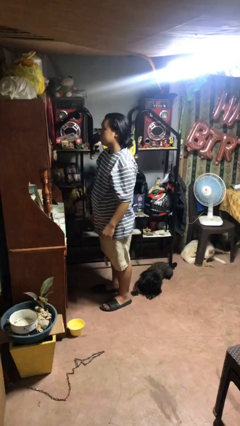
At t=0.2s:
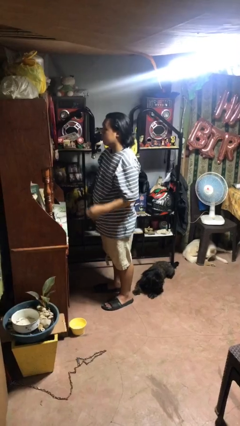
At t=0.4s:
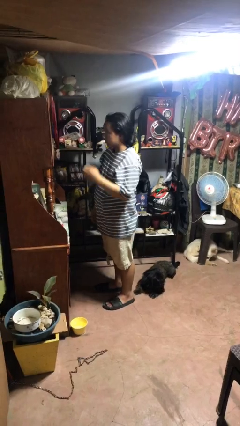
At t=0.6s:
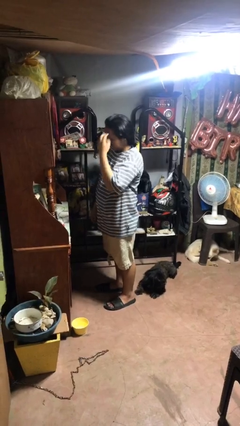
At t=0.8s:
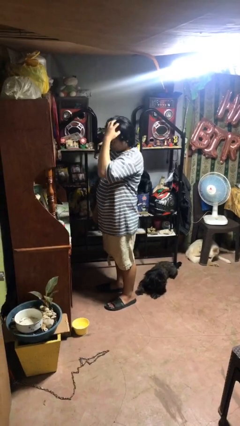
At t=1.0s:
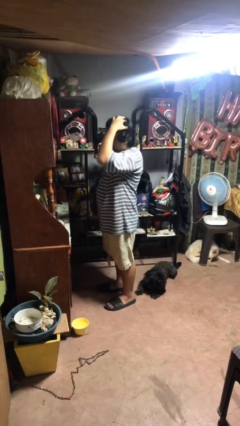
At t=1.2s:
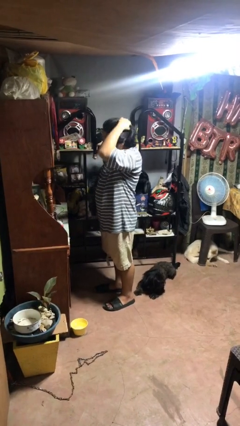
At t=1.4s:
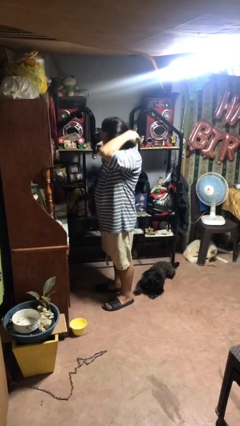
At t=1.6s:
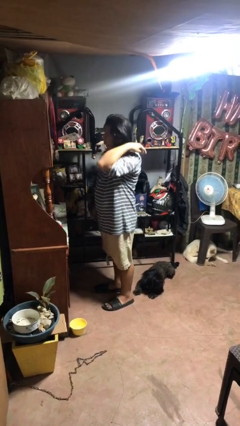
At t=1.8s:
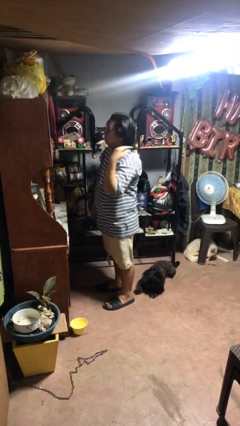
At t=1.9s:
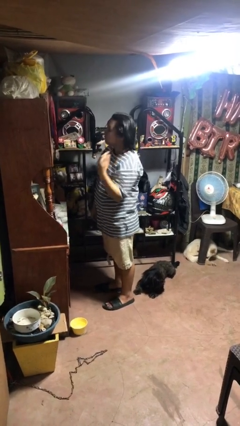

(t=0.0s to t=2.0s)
person strokes hair

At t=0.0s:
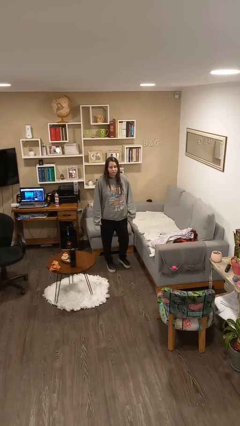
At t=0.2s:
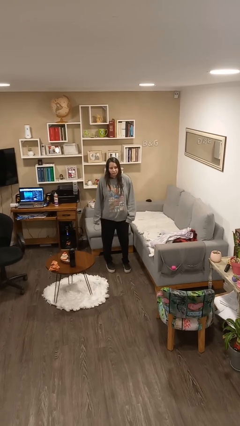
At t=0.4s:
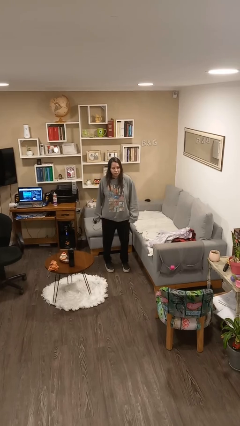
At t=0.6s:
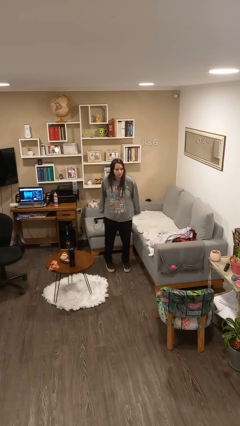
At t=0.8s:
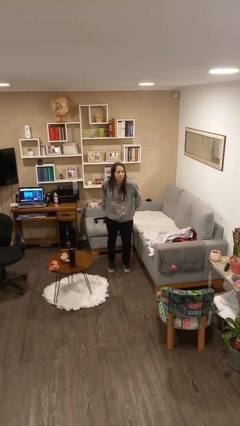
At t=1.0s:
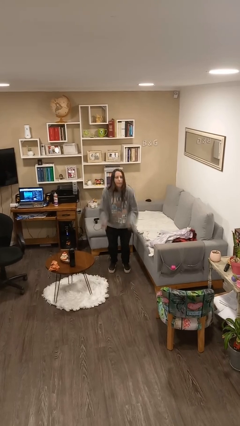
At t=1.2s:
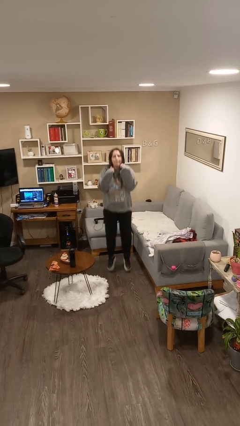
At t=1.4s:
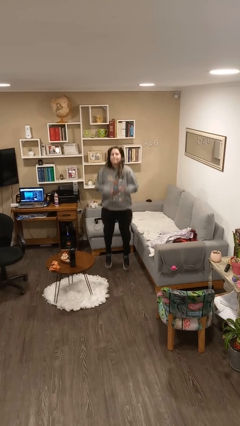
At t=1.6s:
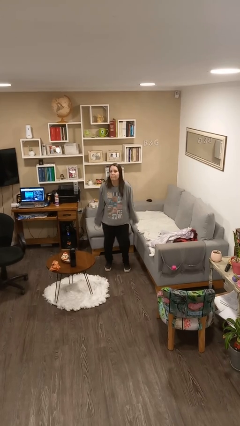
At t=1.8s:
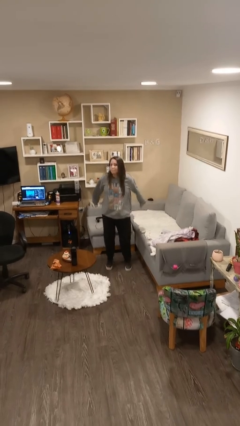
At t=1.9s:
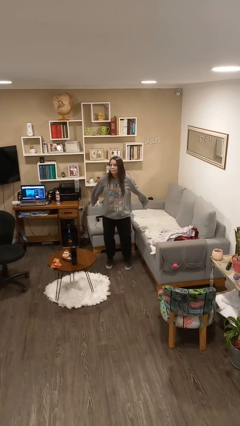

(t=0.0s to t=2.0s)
person jumps

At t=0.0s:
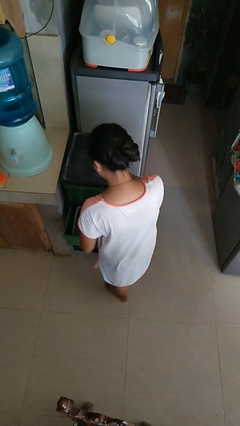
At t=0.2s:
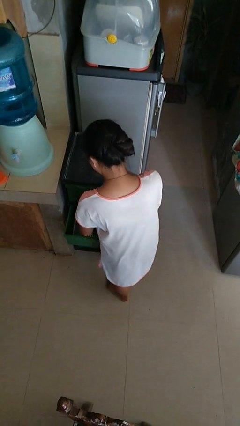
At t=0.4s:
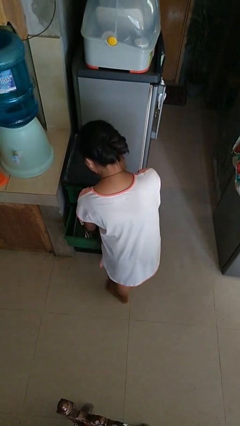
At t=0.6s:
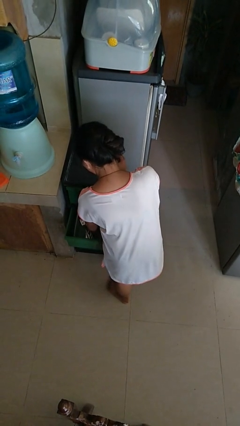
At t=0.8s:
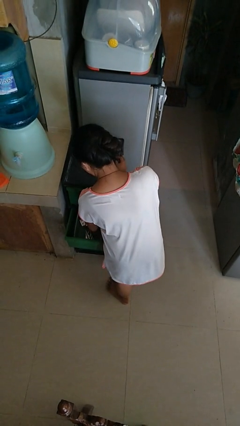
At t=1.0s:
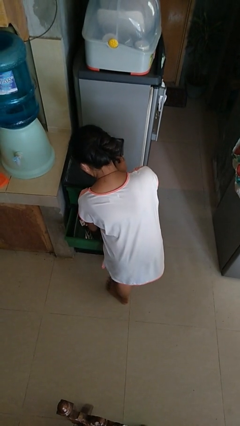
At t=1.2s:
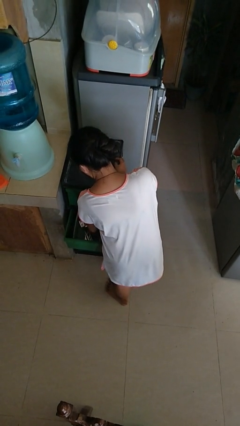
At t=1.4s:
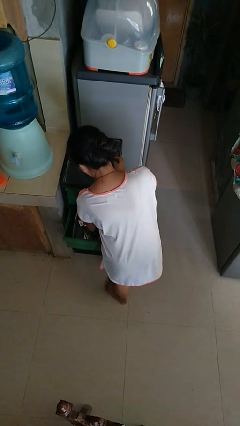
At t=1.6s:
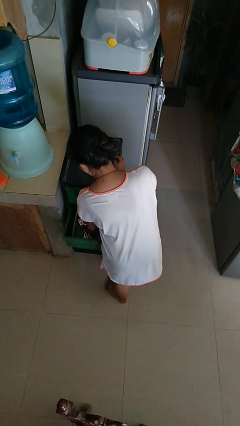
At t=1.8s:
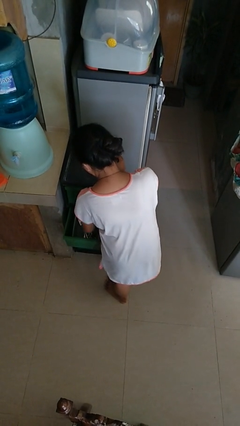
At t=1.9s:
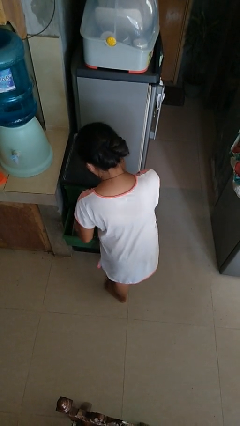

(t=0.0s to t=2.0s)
person puts object into kitchen drawer

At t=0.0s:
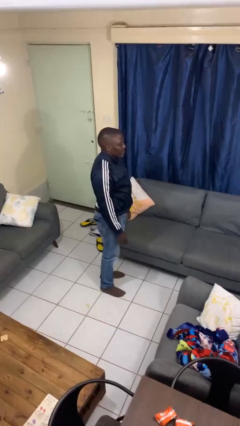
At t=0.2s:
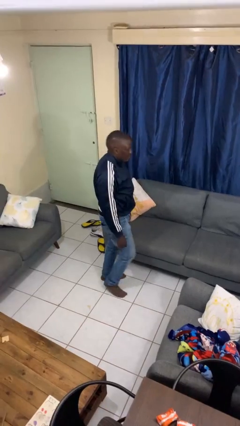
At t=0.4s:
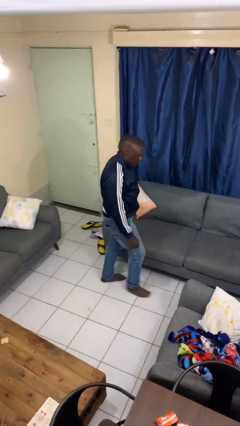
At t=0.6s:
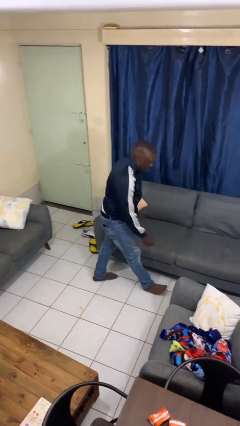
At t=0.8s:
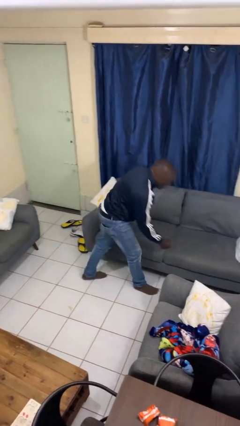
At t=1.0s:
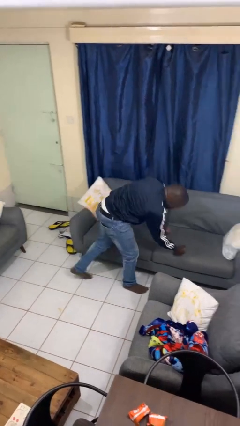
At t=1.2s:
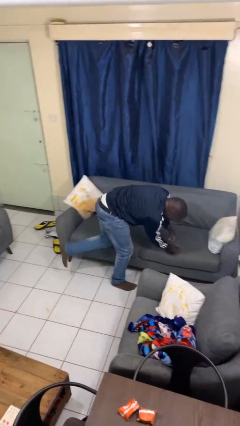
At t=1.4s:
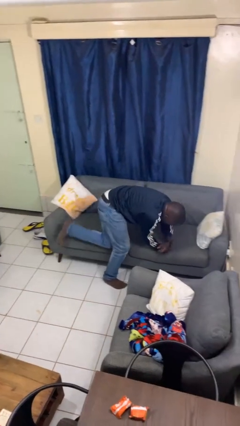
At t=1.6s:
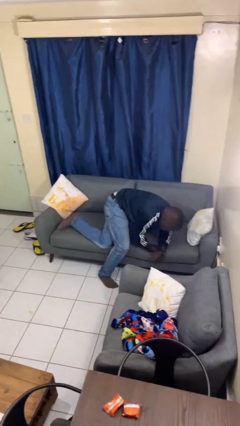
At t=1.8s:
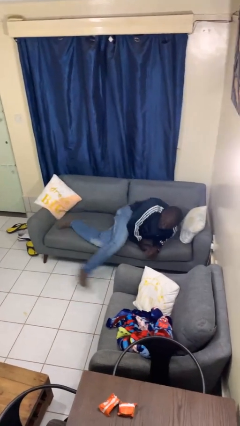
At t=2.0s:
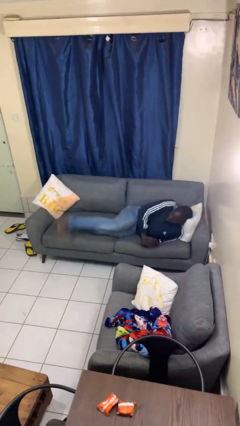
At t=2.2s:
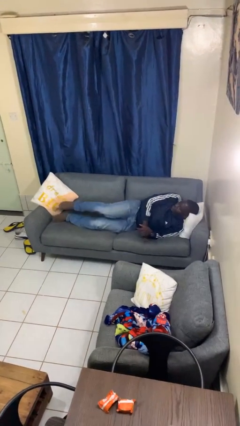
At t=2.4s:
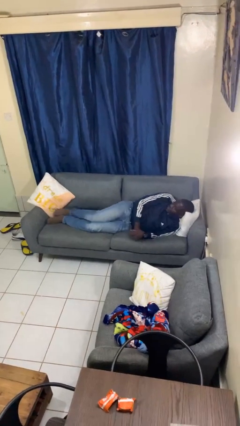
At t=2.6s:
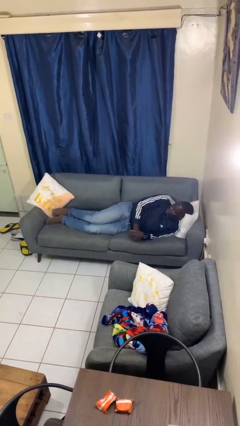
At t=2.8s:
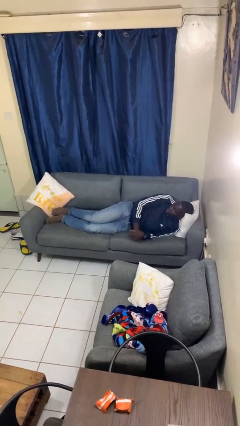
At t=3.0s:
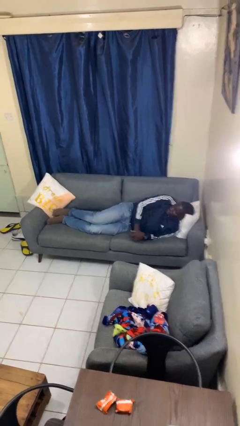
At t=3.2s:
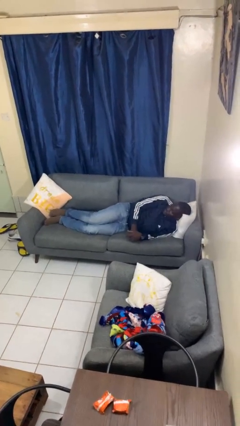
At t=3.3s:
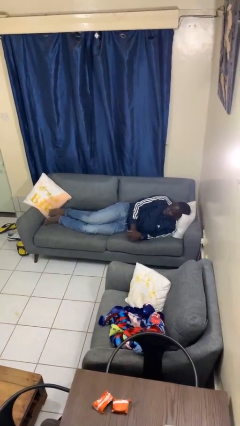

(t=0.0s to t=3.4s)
person lies down on couch

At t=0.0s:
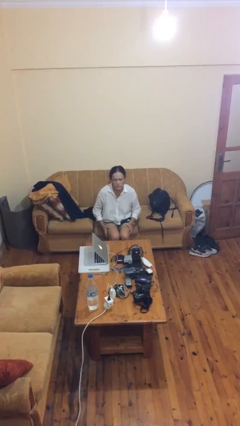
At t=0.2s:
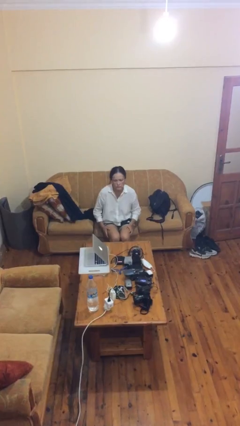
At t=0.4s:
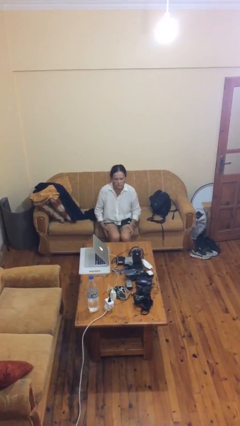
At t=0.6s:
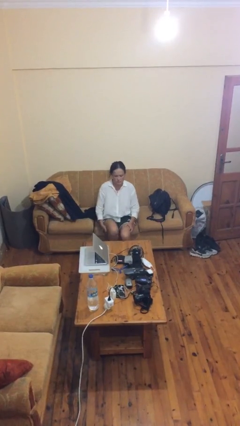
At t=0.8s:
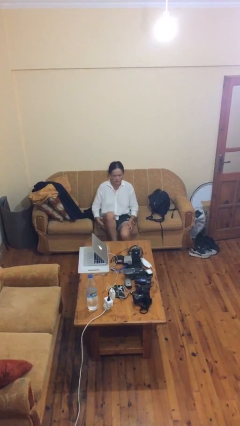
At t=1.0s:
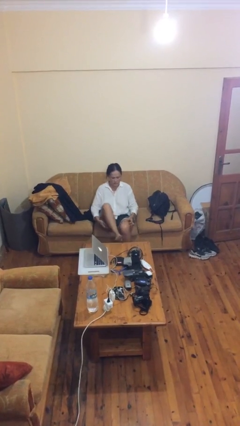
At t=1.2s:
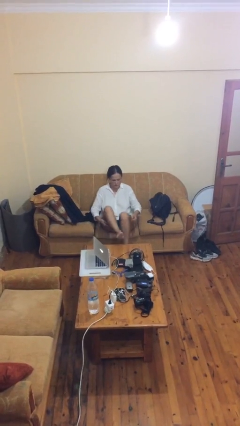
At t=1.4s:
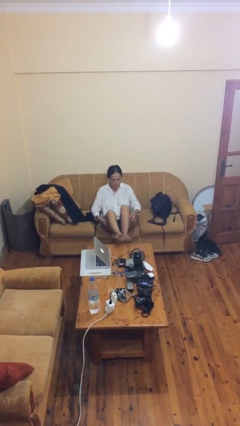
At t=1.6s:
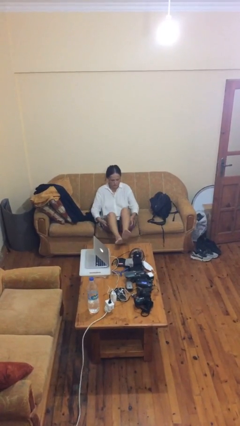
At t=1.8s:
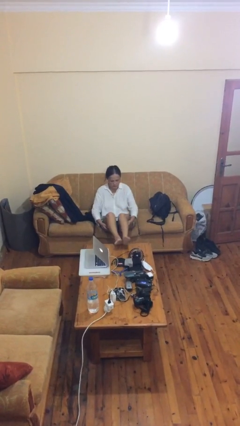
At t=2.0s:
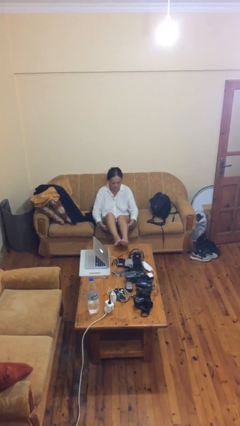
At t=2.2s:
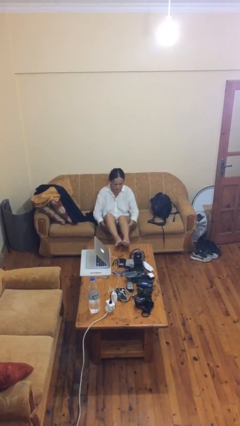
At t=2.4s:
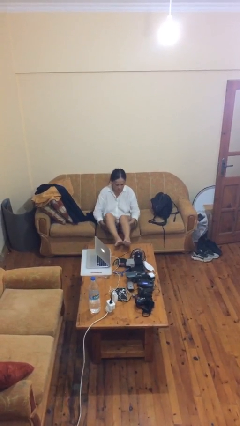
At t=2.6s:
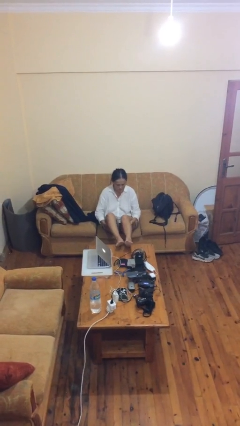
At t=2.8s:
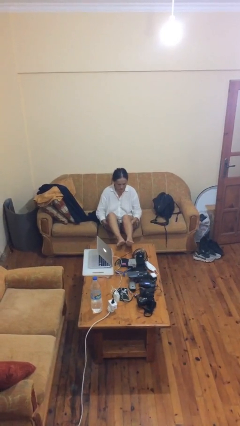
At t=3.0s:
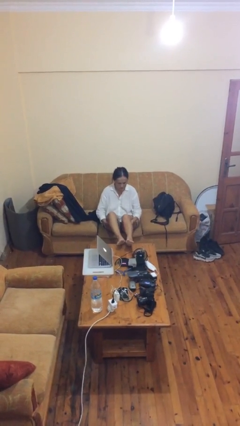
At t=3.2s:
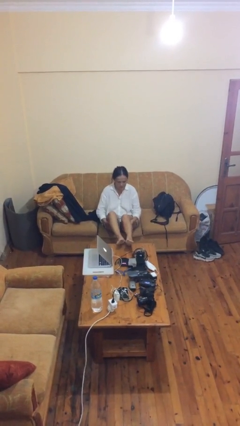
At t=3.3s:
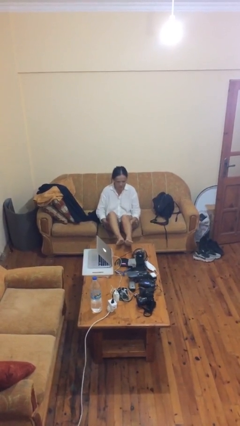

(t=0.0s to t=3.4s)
person puts feet up

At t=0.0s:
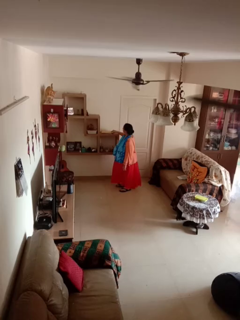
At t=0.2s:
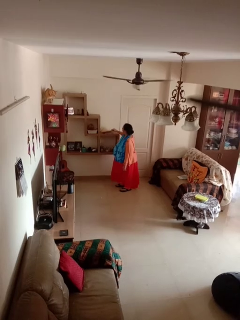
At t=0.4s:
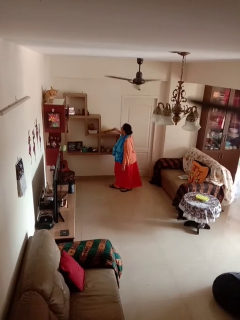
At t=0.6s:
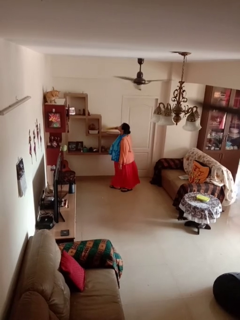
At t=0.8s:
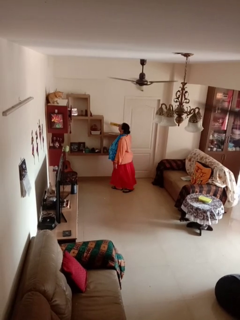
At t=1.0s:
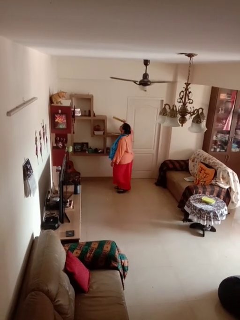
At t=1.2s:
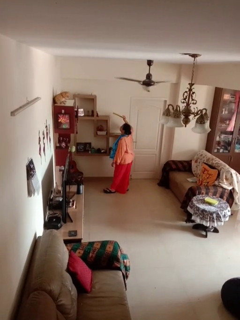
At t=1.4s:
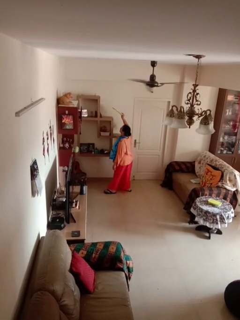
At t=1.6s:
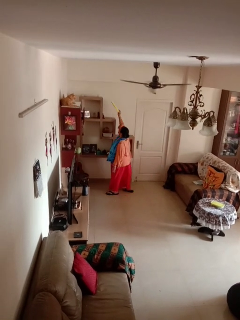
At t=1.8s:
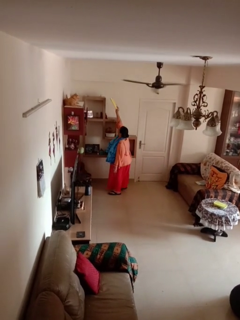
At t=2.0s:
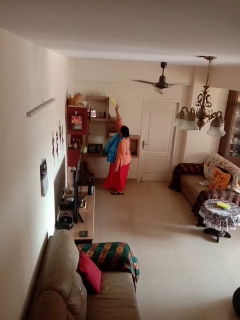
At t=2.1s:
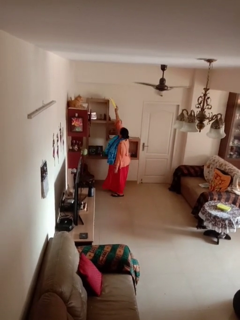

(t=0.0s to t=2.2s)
person picks up object from shelf

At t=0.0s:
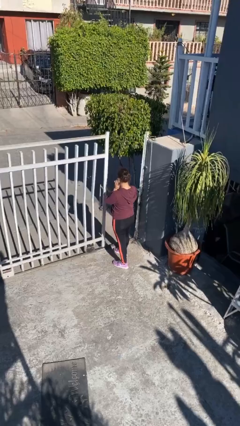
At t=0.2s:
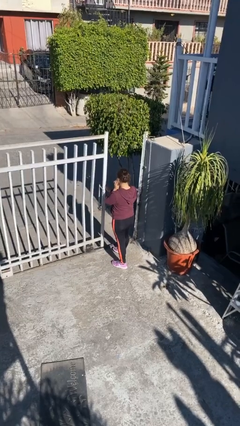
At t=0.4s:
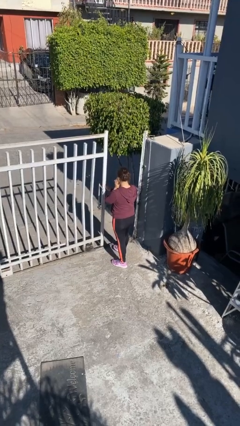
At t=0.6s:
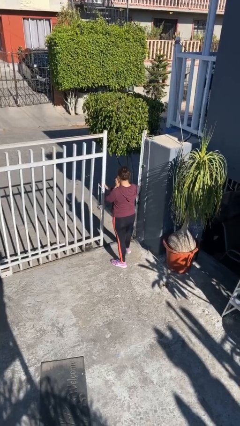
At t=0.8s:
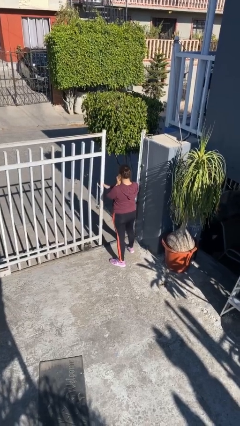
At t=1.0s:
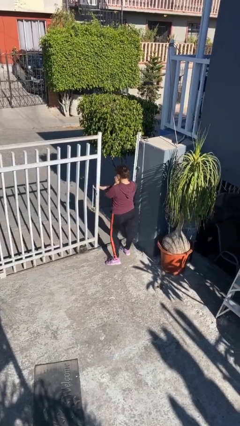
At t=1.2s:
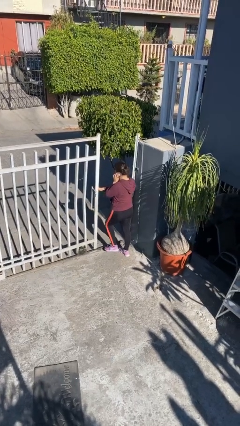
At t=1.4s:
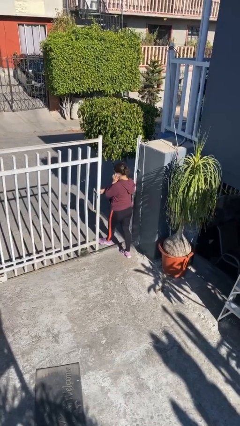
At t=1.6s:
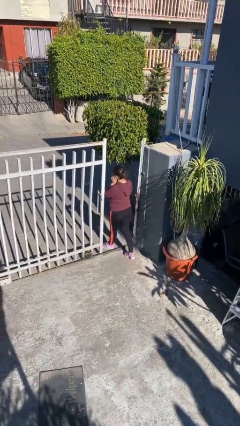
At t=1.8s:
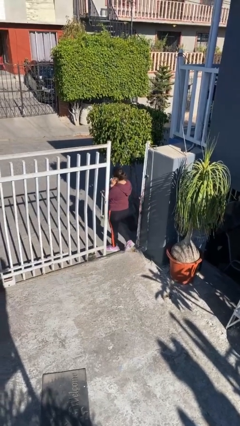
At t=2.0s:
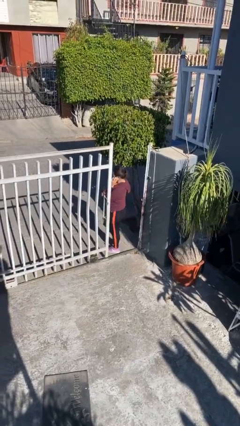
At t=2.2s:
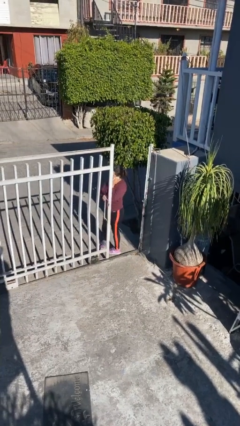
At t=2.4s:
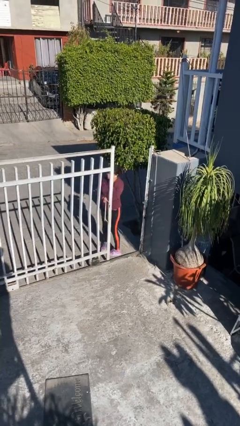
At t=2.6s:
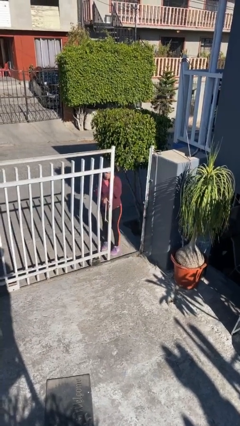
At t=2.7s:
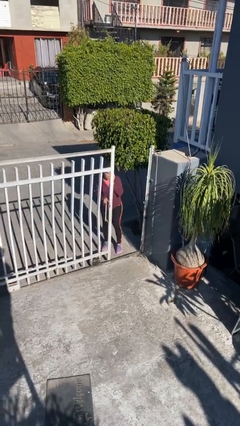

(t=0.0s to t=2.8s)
person exits scene through structure
